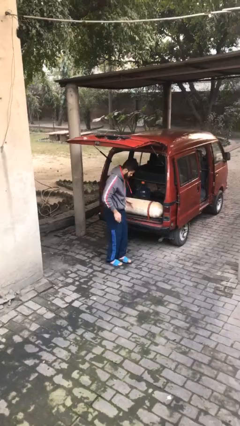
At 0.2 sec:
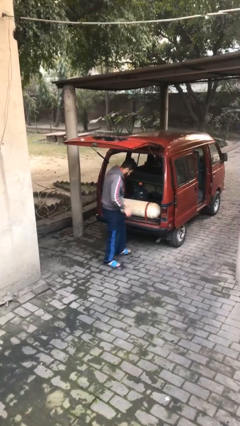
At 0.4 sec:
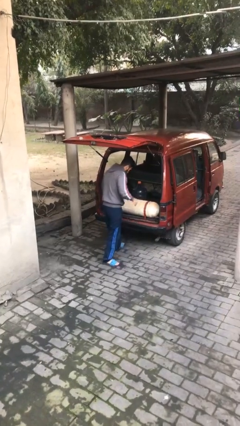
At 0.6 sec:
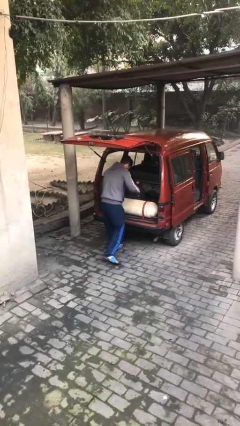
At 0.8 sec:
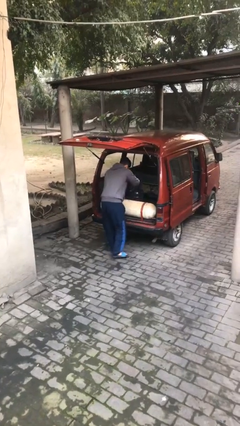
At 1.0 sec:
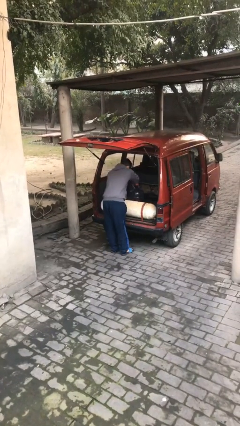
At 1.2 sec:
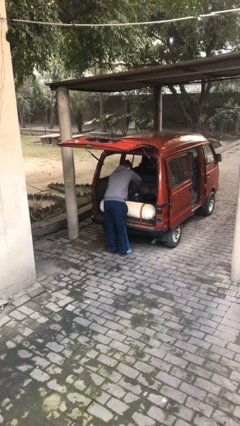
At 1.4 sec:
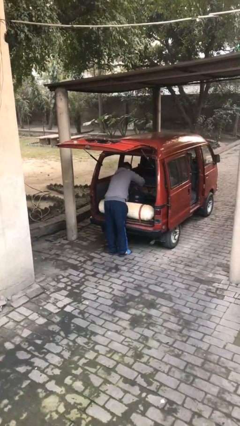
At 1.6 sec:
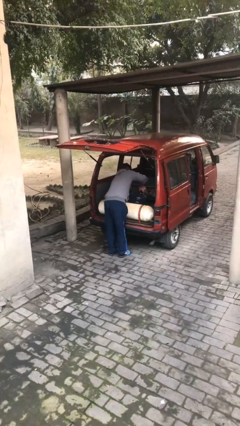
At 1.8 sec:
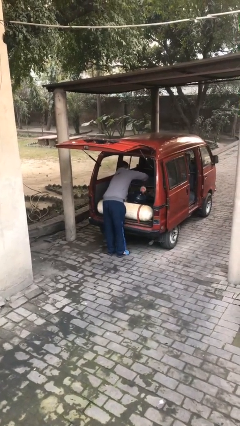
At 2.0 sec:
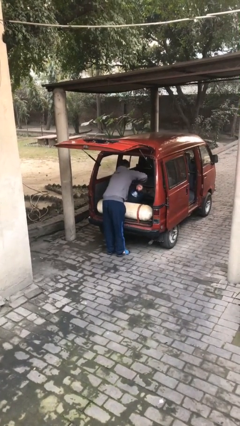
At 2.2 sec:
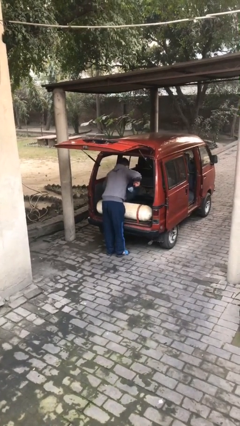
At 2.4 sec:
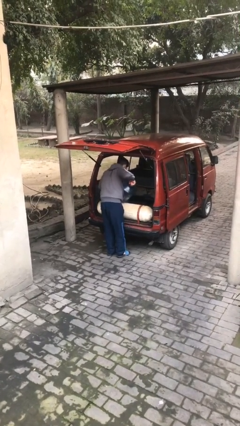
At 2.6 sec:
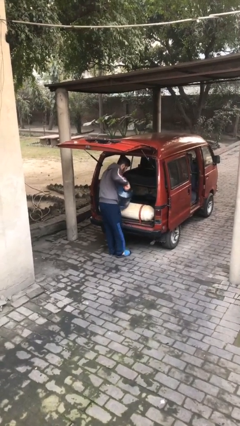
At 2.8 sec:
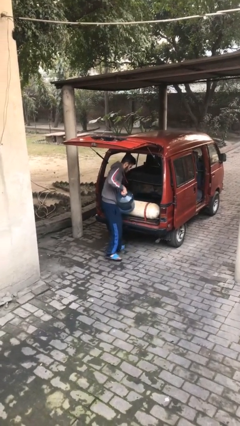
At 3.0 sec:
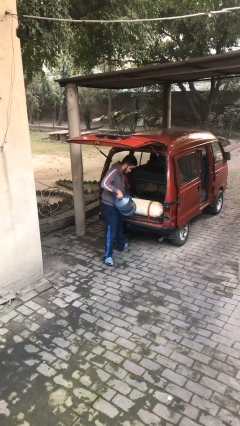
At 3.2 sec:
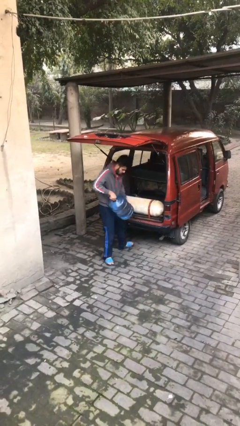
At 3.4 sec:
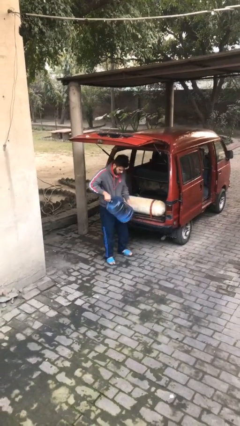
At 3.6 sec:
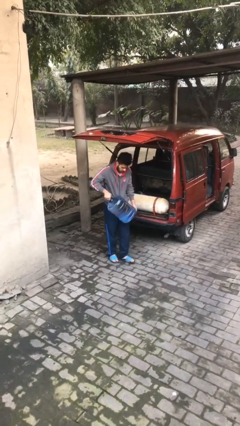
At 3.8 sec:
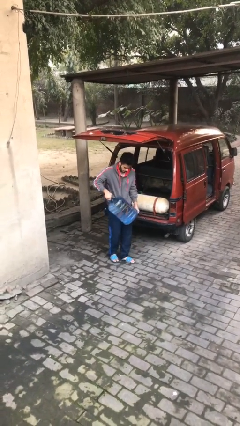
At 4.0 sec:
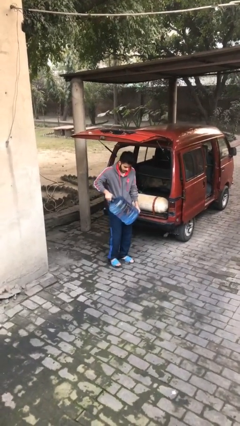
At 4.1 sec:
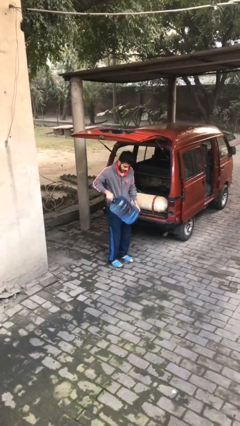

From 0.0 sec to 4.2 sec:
person unloads car

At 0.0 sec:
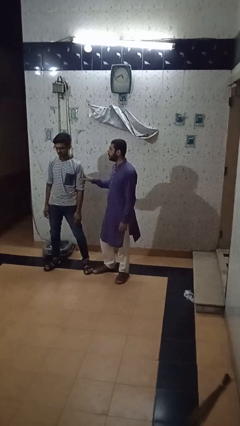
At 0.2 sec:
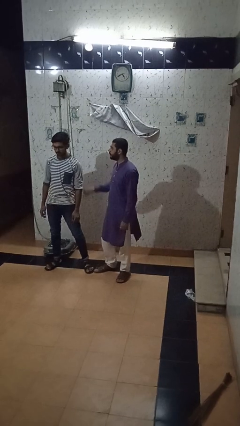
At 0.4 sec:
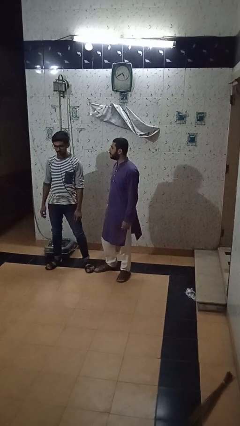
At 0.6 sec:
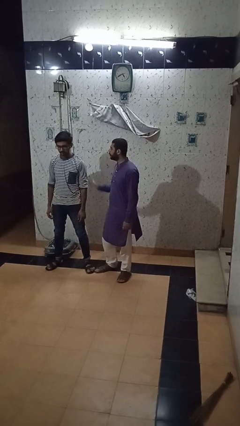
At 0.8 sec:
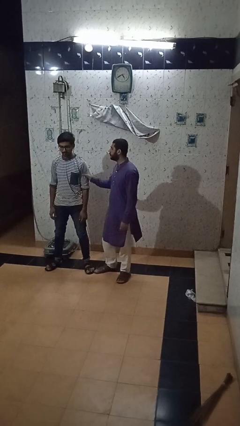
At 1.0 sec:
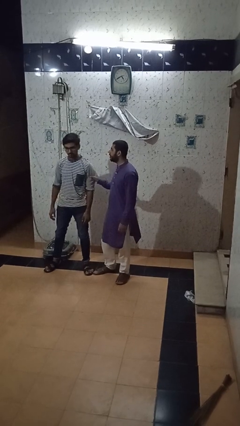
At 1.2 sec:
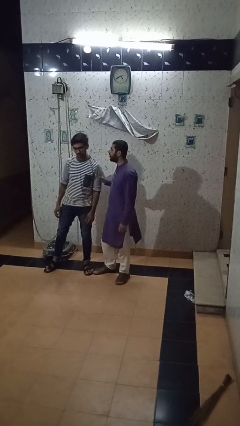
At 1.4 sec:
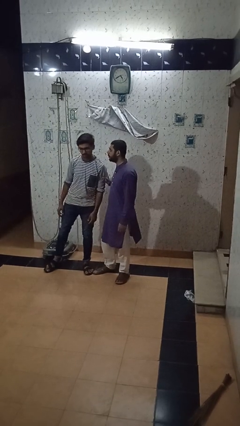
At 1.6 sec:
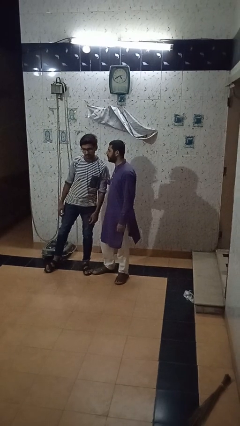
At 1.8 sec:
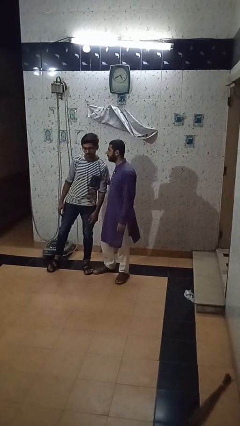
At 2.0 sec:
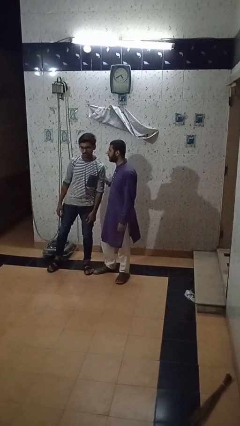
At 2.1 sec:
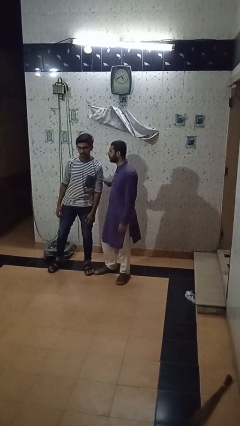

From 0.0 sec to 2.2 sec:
person grabs person by bicep

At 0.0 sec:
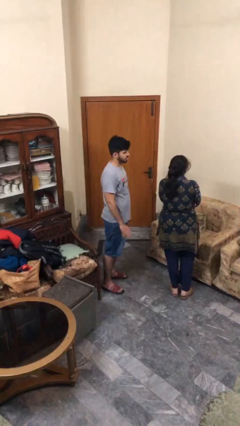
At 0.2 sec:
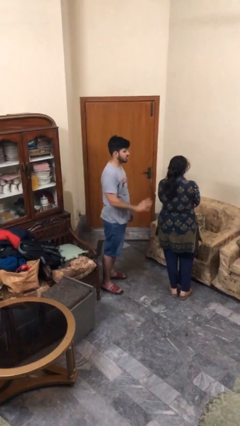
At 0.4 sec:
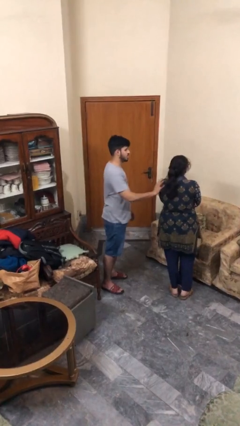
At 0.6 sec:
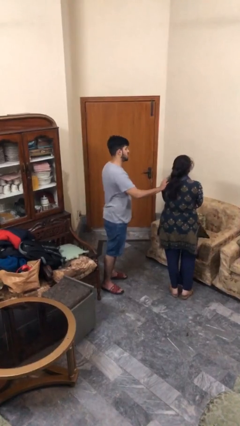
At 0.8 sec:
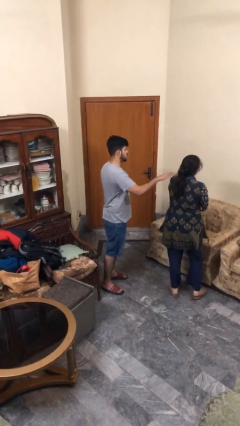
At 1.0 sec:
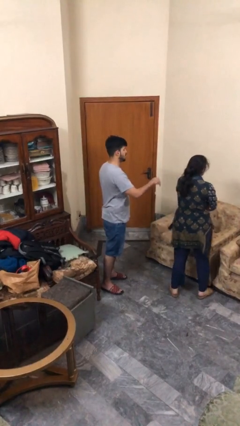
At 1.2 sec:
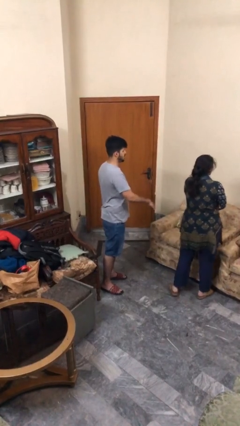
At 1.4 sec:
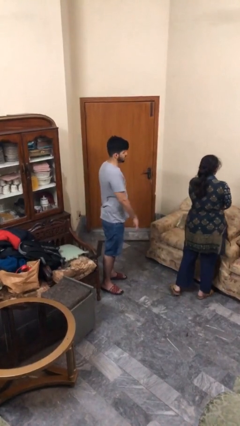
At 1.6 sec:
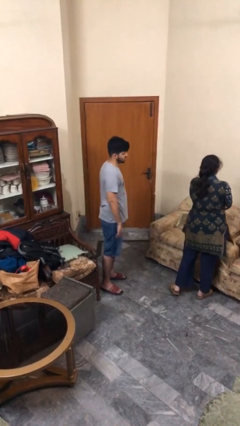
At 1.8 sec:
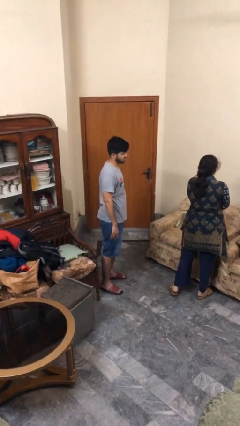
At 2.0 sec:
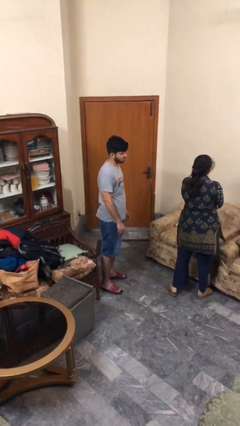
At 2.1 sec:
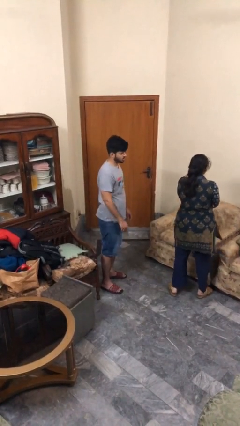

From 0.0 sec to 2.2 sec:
person shoves person

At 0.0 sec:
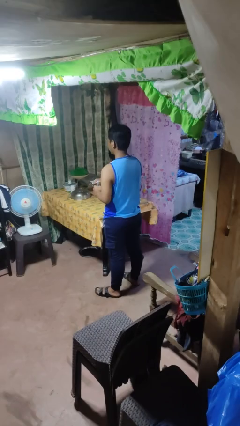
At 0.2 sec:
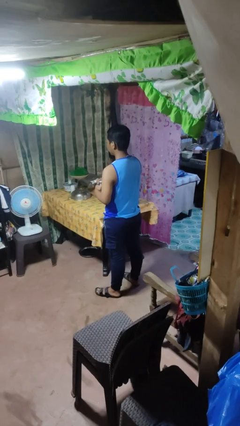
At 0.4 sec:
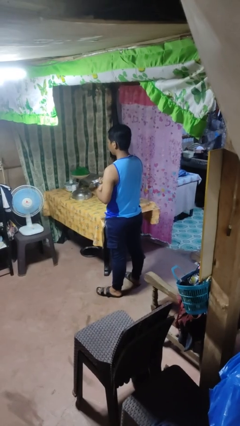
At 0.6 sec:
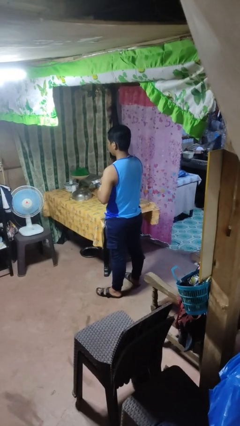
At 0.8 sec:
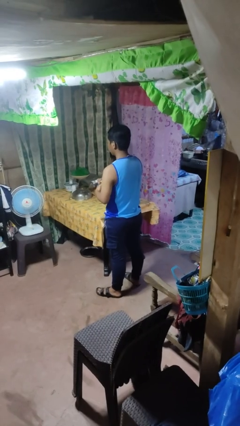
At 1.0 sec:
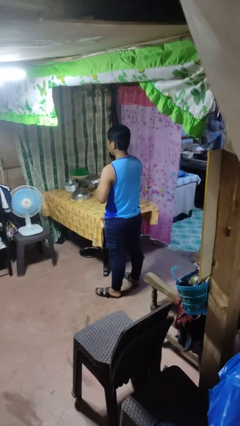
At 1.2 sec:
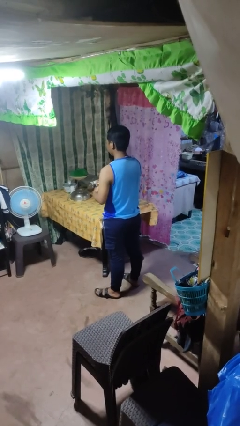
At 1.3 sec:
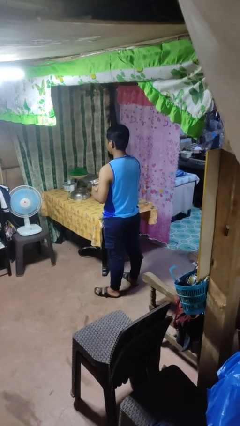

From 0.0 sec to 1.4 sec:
person closes jar

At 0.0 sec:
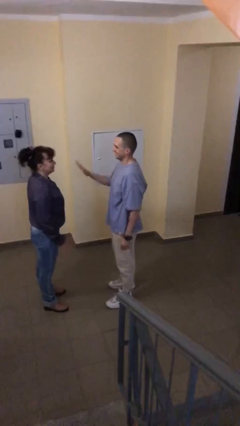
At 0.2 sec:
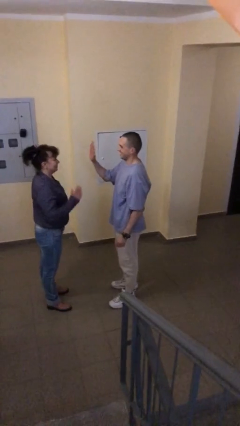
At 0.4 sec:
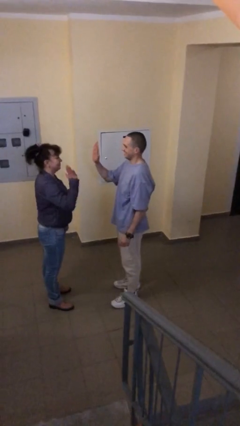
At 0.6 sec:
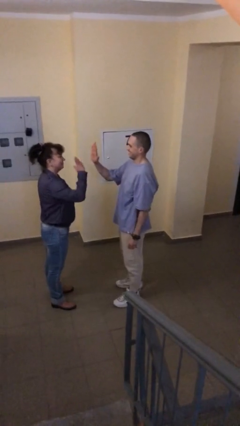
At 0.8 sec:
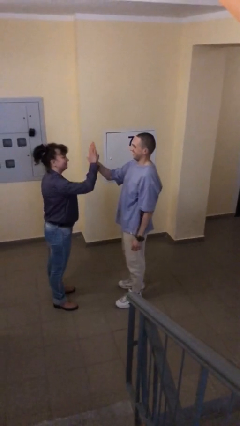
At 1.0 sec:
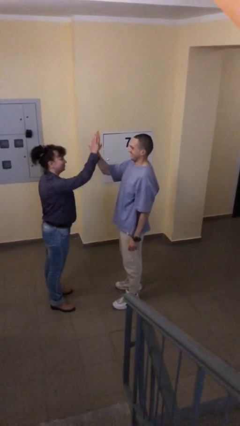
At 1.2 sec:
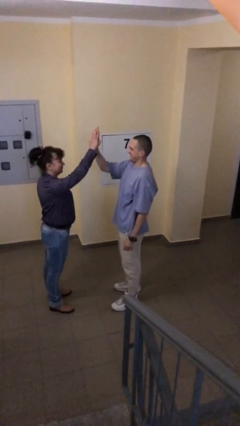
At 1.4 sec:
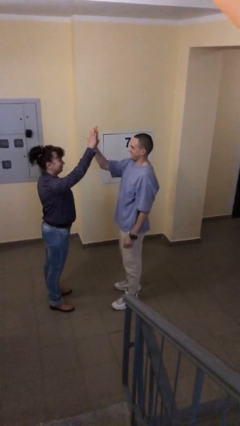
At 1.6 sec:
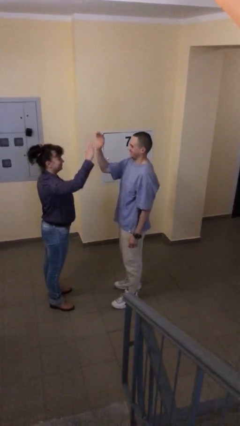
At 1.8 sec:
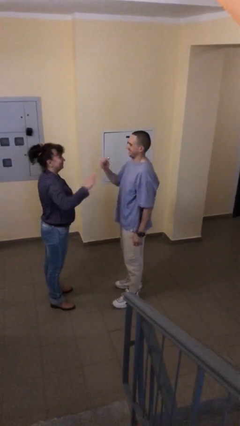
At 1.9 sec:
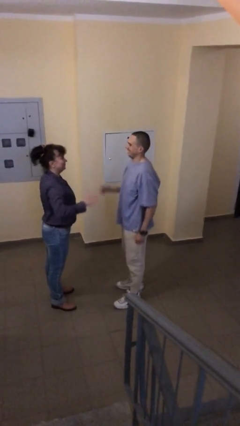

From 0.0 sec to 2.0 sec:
person highfives hand

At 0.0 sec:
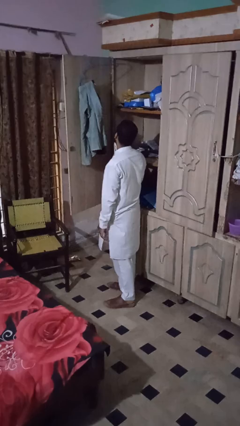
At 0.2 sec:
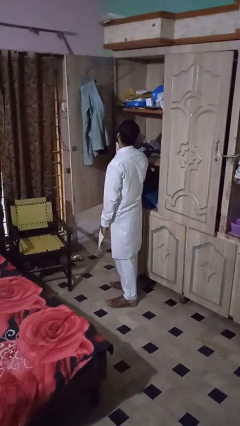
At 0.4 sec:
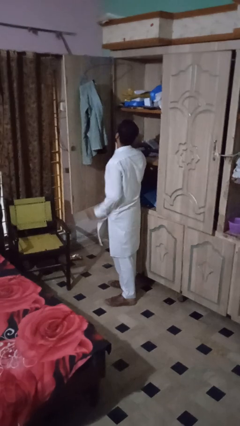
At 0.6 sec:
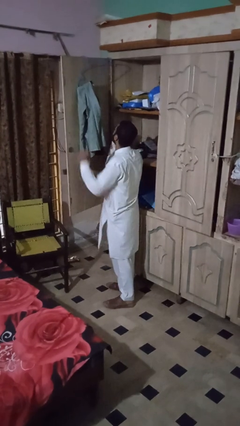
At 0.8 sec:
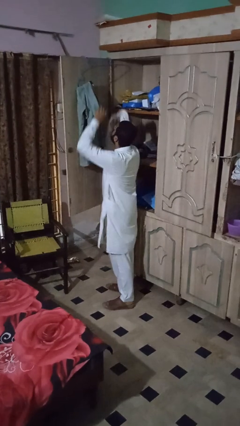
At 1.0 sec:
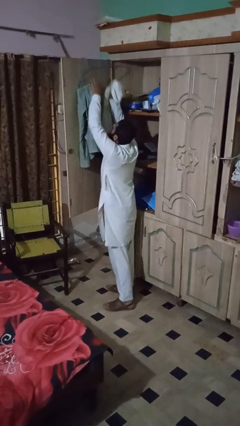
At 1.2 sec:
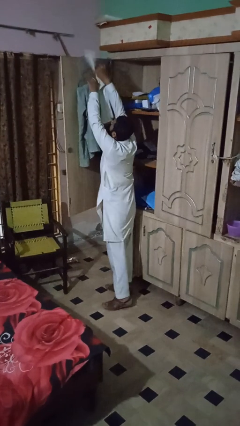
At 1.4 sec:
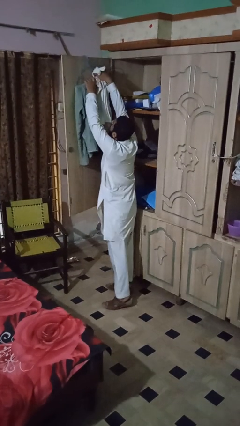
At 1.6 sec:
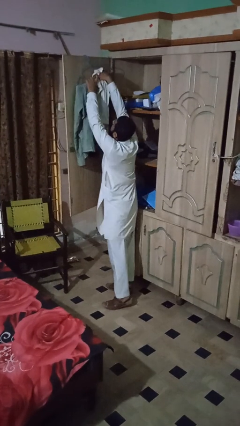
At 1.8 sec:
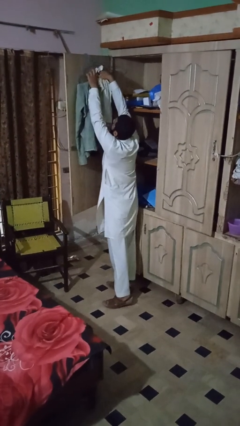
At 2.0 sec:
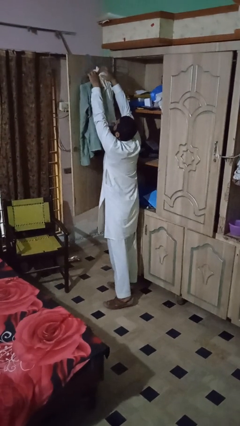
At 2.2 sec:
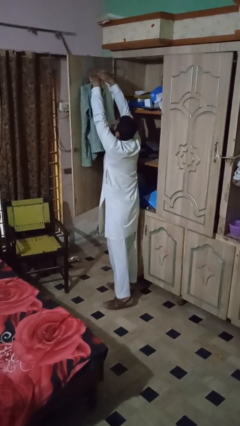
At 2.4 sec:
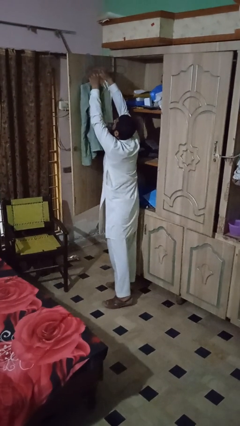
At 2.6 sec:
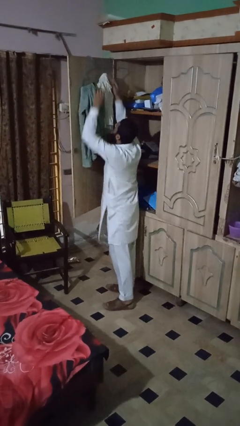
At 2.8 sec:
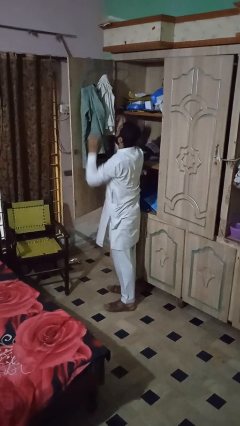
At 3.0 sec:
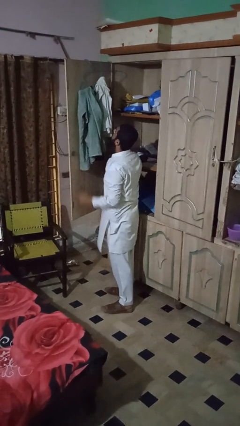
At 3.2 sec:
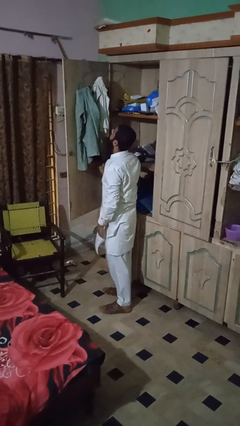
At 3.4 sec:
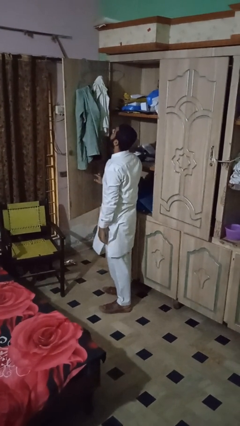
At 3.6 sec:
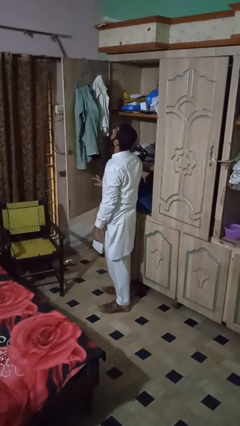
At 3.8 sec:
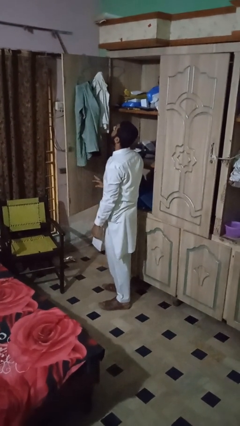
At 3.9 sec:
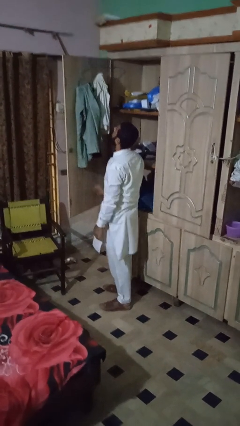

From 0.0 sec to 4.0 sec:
person puts clothes into closet

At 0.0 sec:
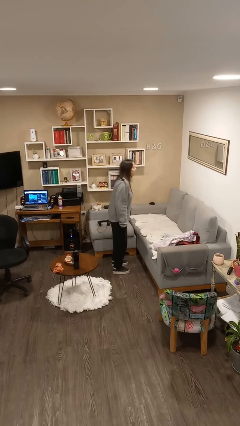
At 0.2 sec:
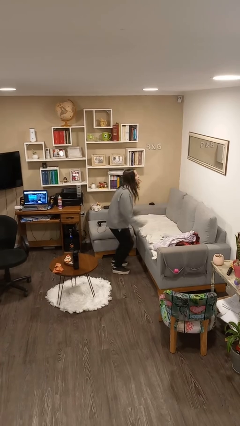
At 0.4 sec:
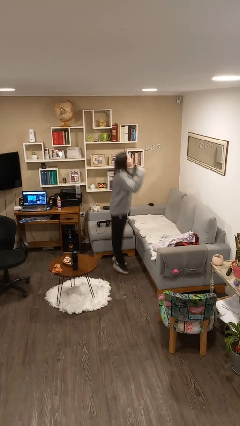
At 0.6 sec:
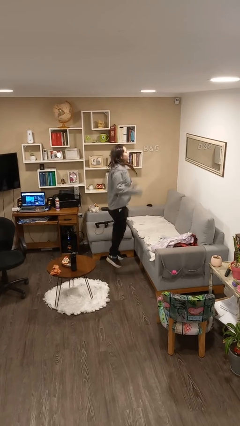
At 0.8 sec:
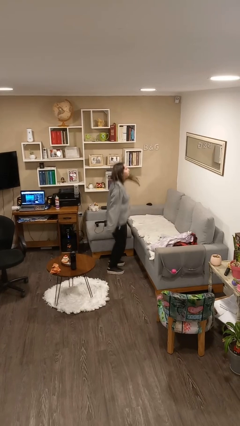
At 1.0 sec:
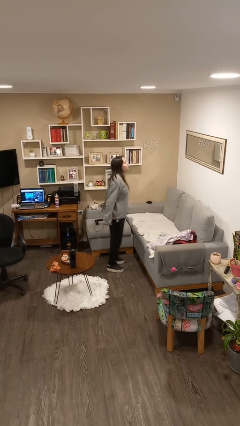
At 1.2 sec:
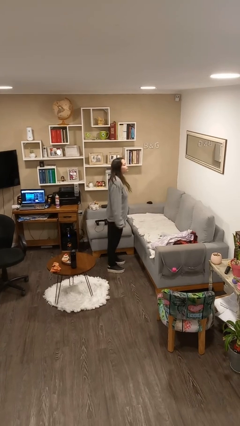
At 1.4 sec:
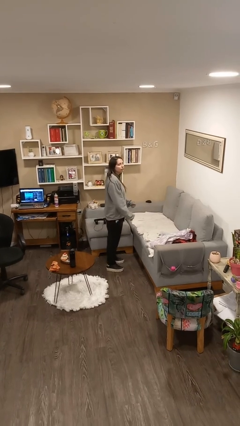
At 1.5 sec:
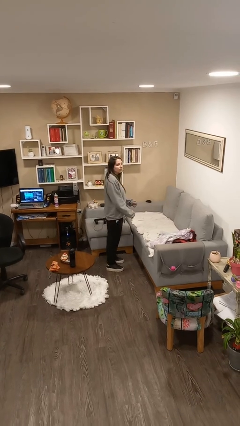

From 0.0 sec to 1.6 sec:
person jumps
